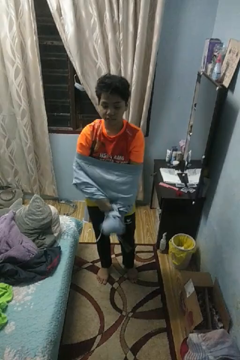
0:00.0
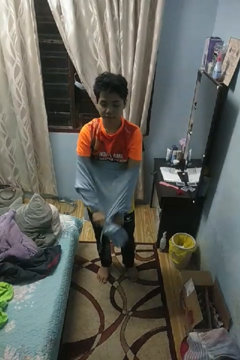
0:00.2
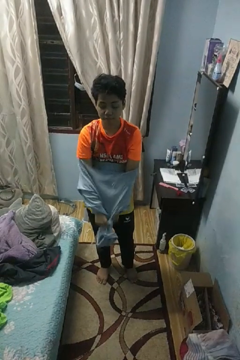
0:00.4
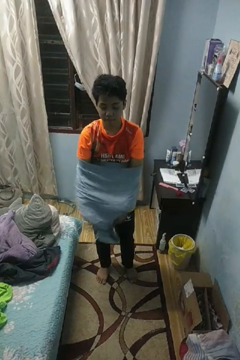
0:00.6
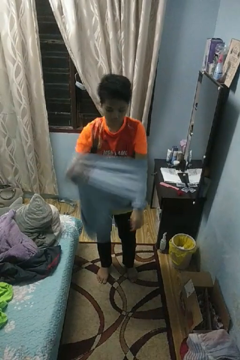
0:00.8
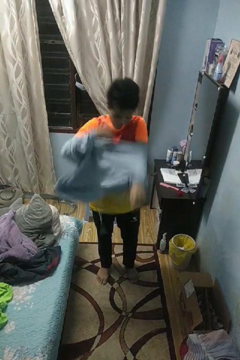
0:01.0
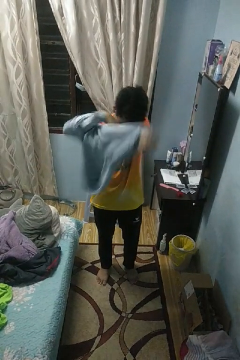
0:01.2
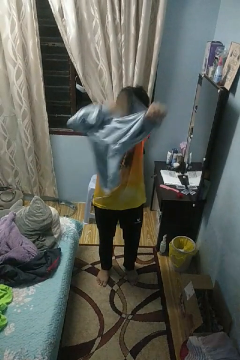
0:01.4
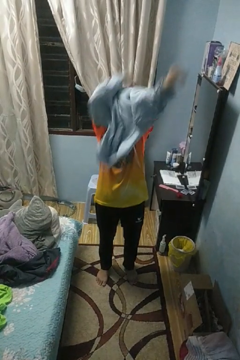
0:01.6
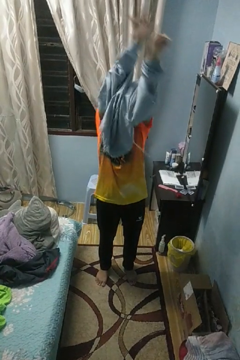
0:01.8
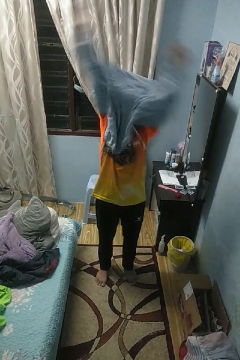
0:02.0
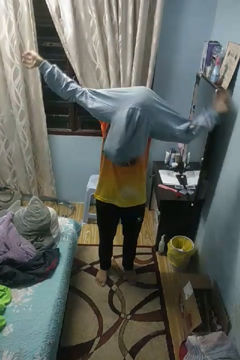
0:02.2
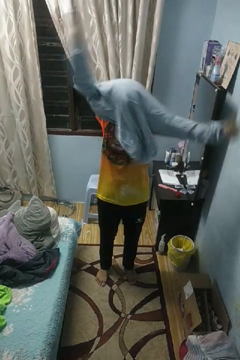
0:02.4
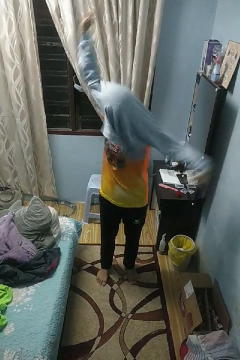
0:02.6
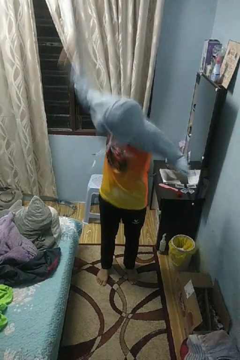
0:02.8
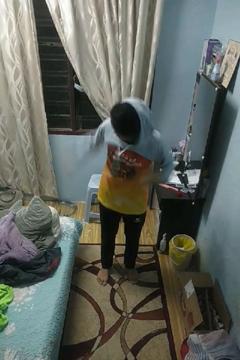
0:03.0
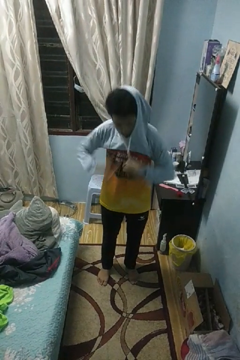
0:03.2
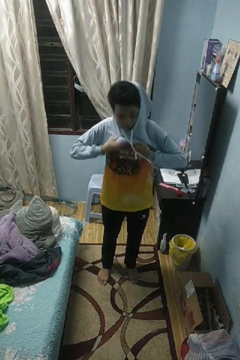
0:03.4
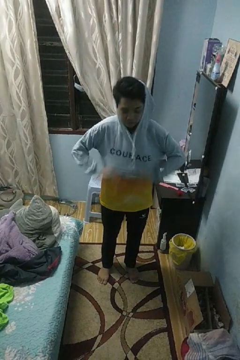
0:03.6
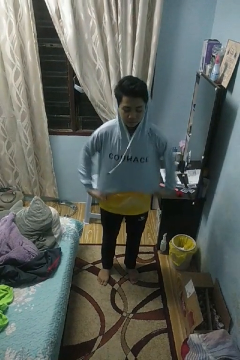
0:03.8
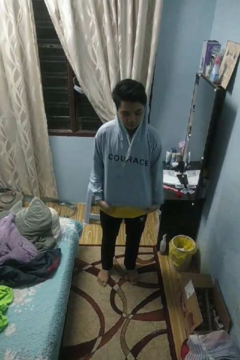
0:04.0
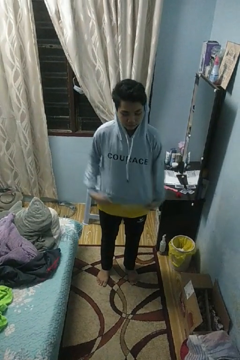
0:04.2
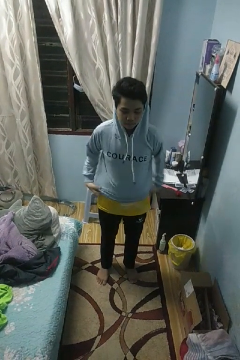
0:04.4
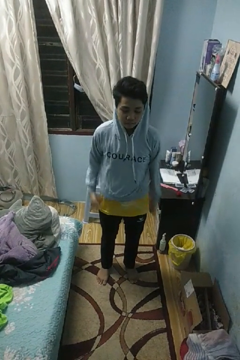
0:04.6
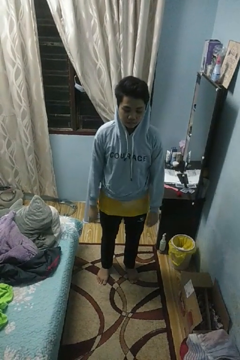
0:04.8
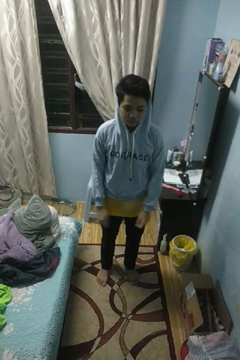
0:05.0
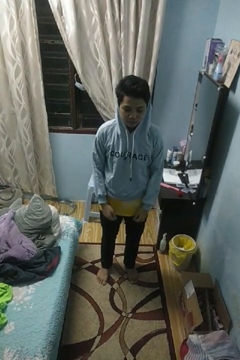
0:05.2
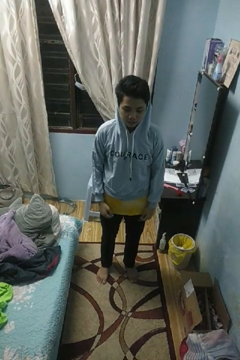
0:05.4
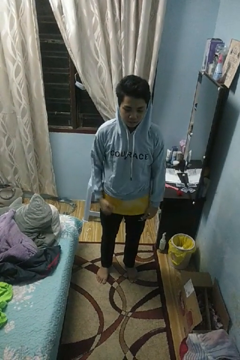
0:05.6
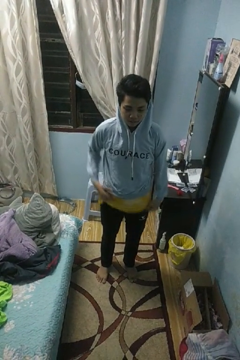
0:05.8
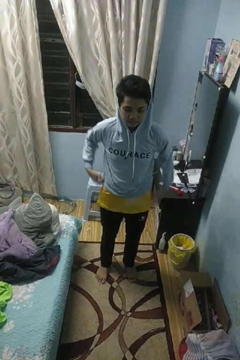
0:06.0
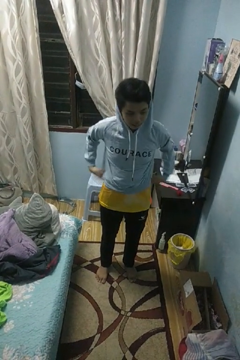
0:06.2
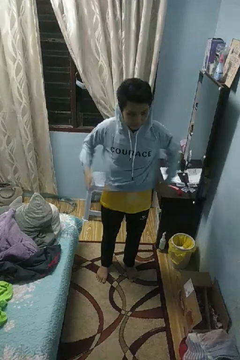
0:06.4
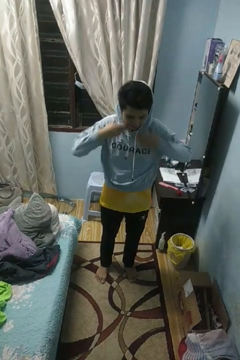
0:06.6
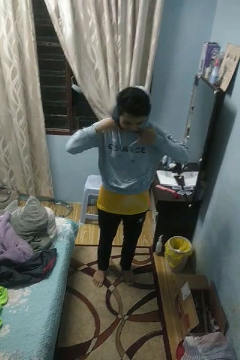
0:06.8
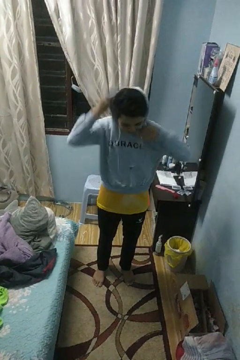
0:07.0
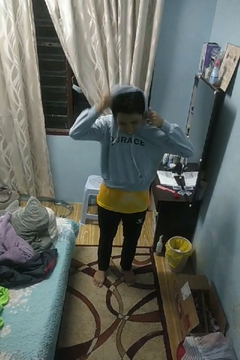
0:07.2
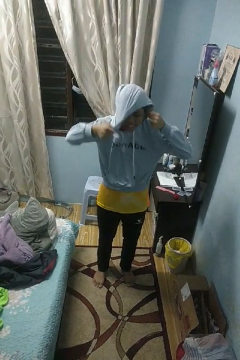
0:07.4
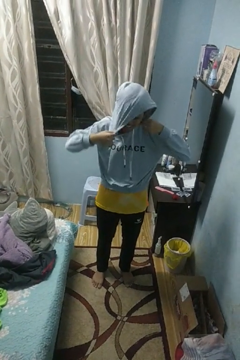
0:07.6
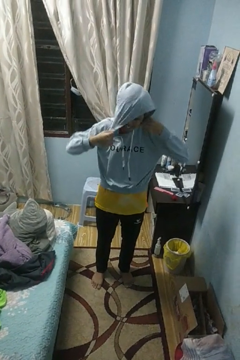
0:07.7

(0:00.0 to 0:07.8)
person puts on hoodie

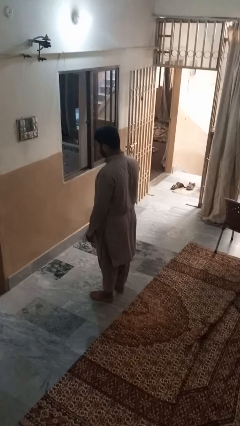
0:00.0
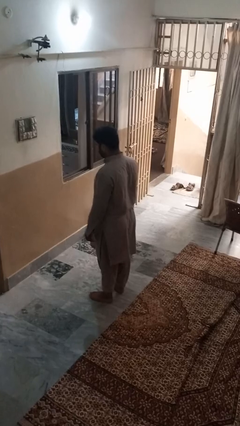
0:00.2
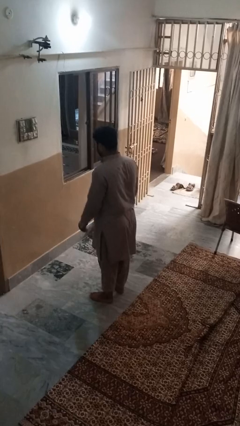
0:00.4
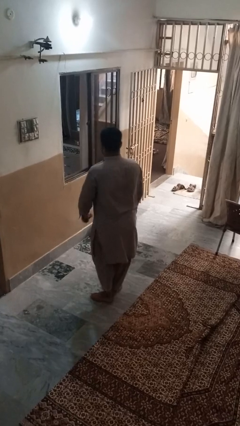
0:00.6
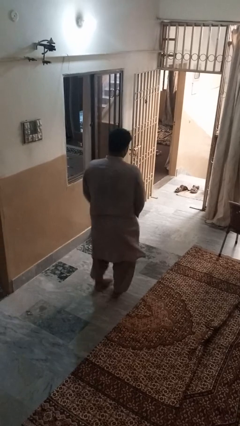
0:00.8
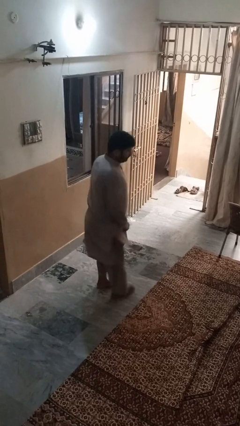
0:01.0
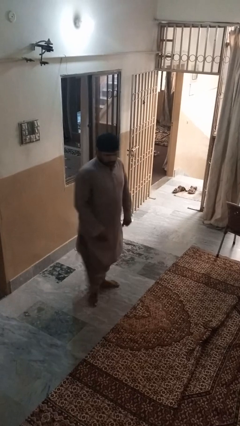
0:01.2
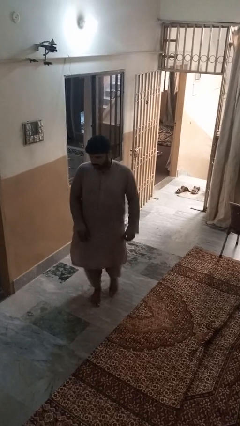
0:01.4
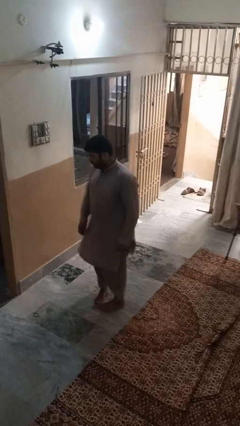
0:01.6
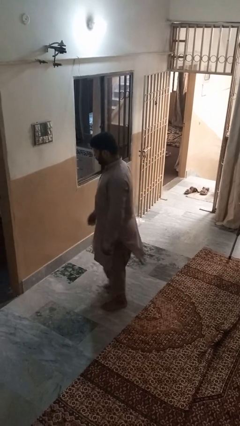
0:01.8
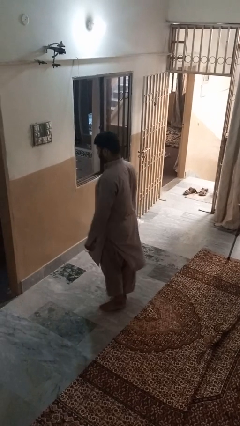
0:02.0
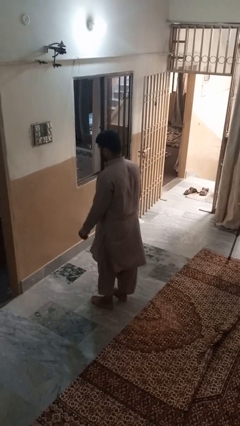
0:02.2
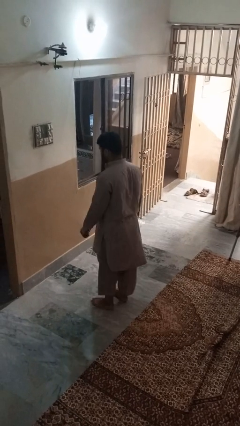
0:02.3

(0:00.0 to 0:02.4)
person twirls

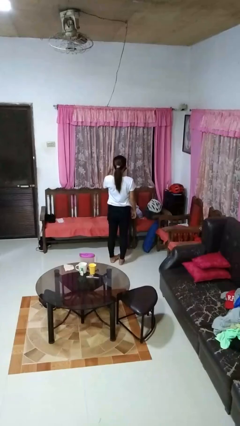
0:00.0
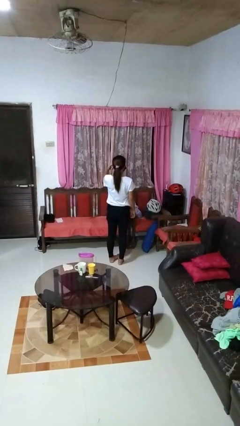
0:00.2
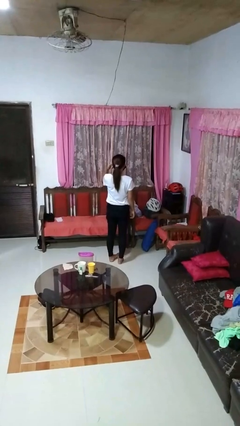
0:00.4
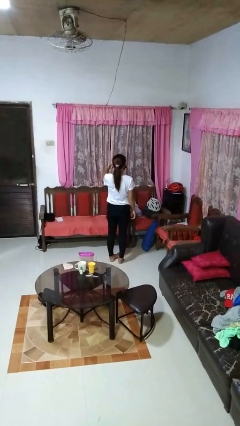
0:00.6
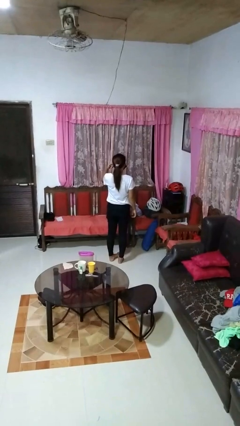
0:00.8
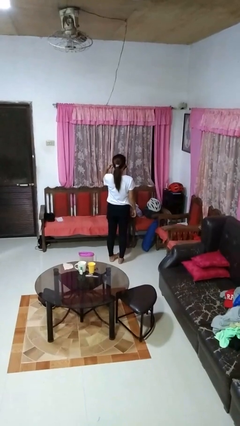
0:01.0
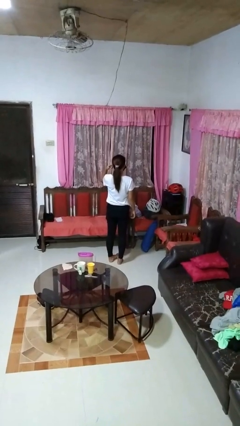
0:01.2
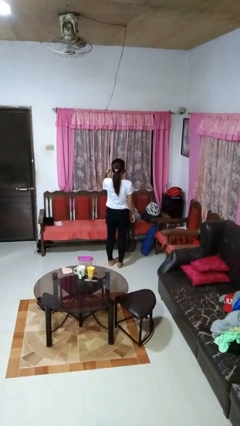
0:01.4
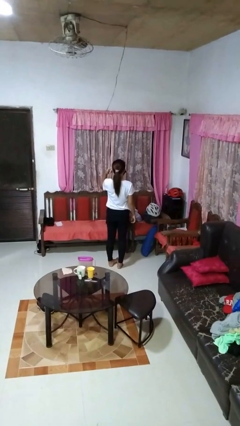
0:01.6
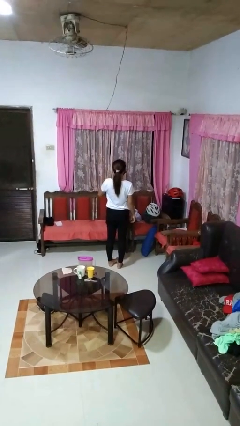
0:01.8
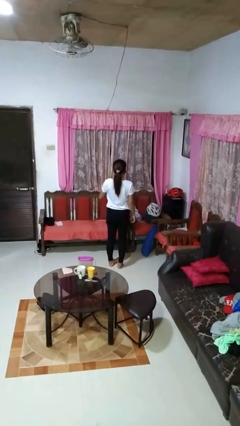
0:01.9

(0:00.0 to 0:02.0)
person gestures listen closely

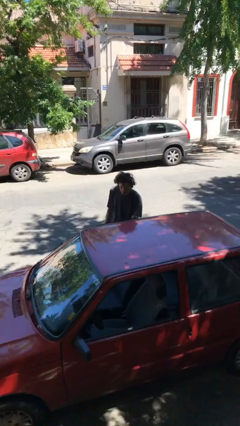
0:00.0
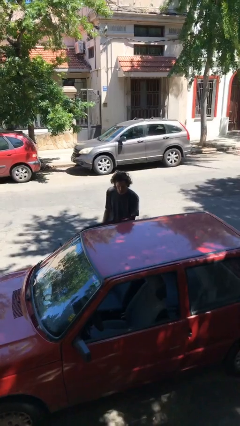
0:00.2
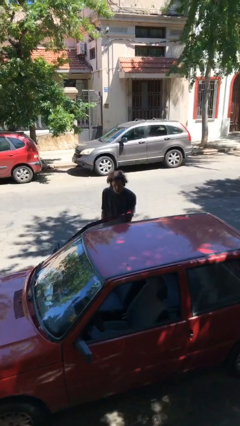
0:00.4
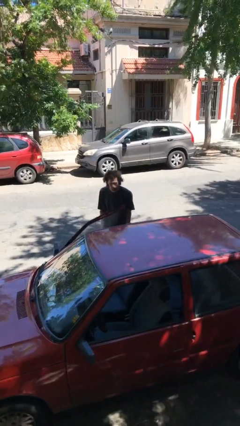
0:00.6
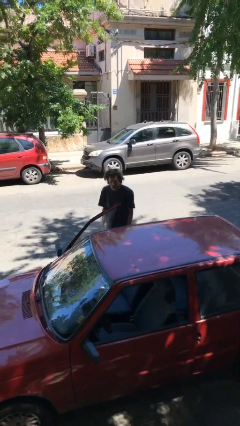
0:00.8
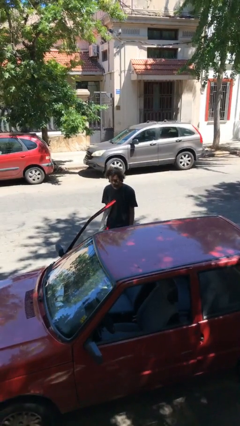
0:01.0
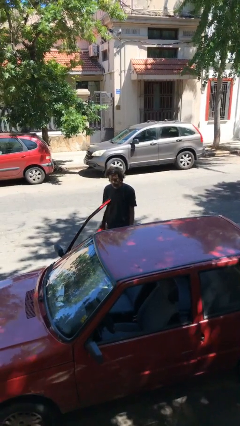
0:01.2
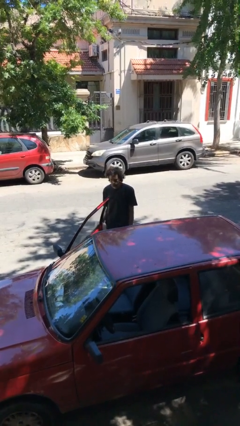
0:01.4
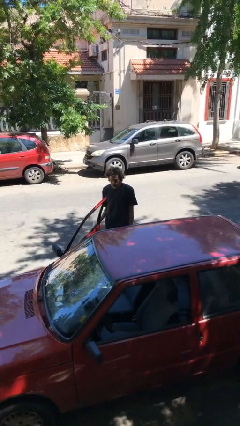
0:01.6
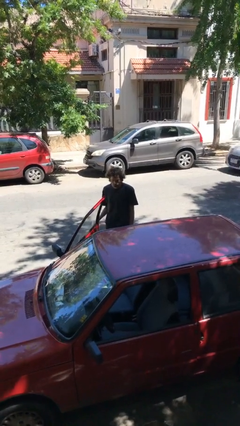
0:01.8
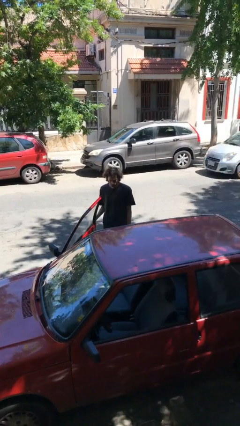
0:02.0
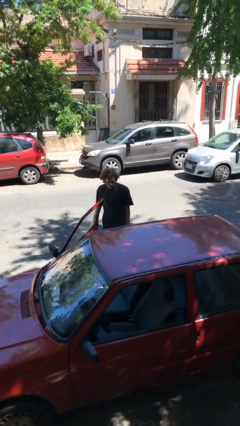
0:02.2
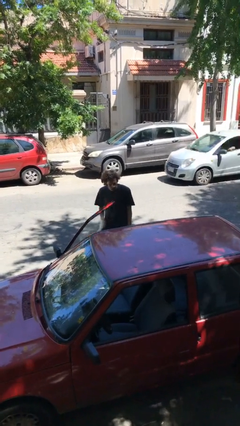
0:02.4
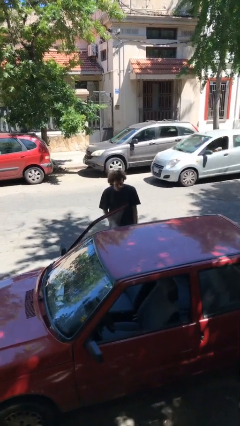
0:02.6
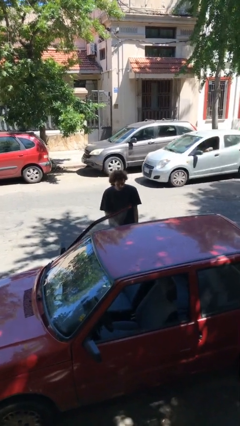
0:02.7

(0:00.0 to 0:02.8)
person opens car door

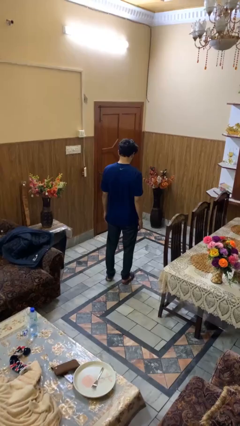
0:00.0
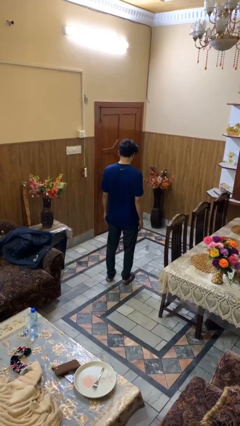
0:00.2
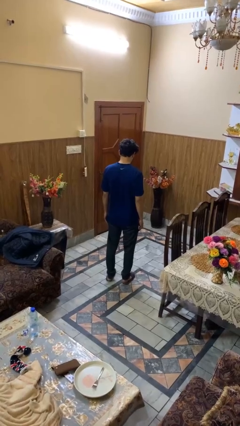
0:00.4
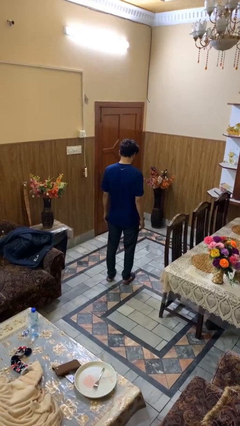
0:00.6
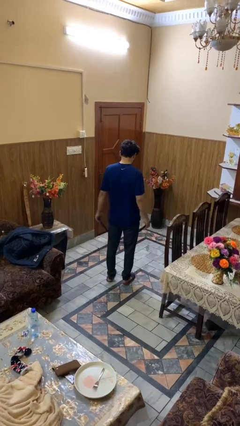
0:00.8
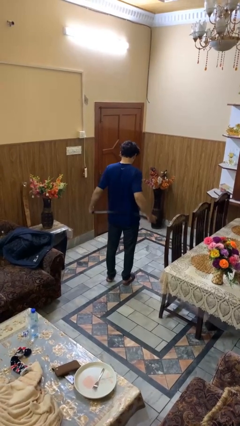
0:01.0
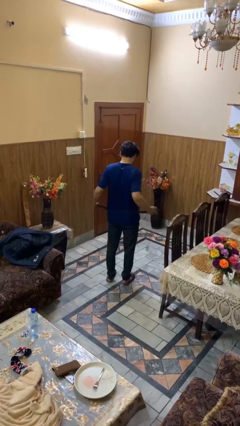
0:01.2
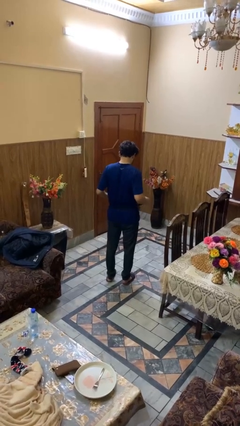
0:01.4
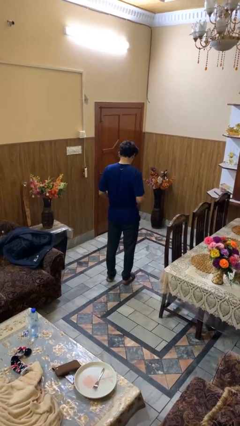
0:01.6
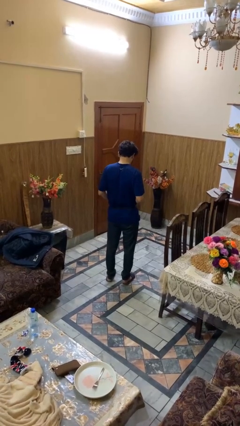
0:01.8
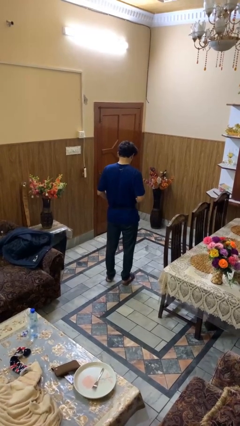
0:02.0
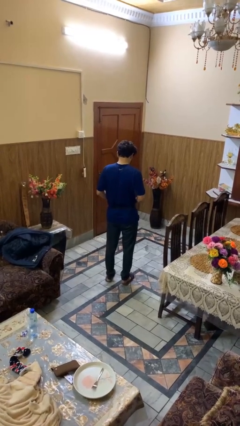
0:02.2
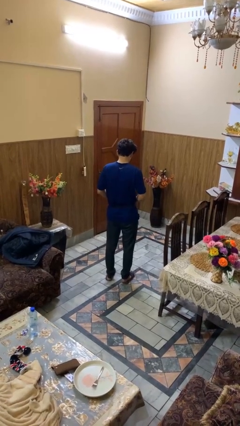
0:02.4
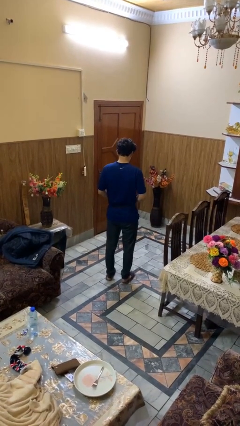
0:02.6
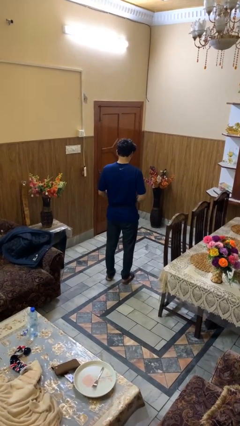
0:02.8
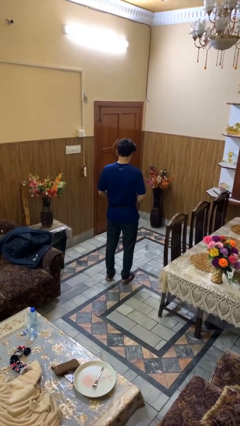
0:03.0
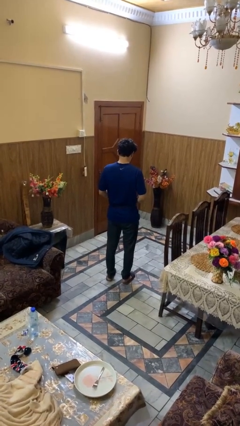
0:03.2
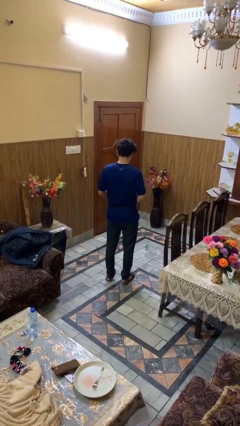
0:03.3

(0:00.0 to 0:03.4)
person puts on belt

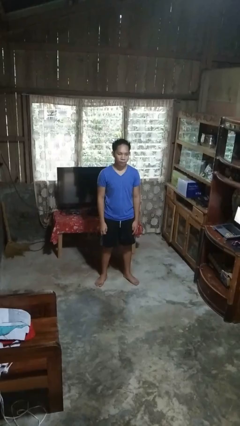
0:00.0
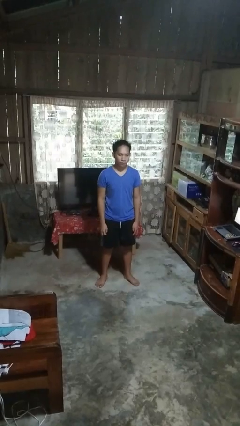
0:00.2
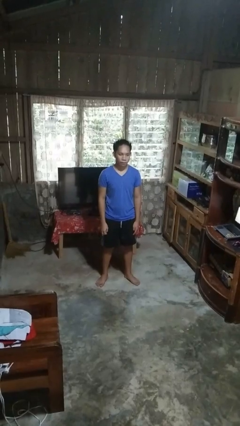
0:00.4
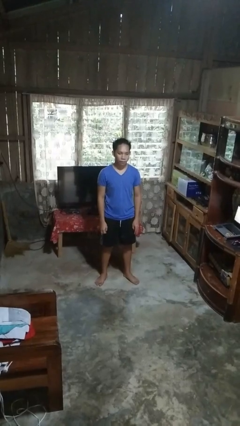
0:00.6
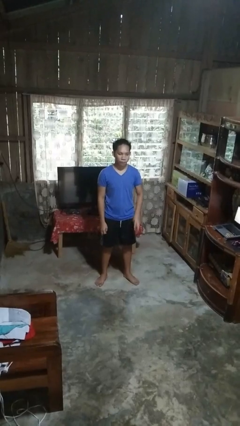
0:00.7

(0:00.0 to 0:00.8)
person gestures number three
